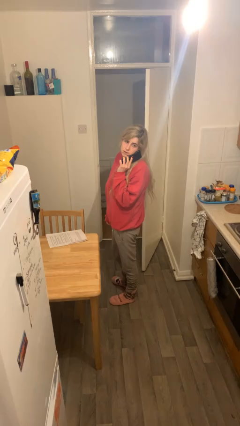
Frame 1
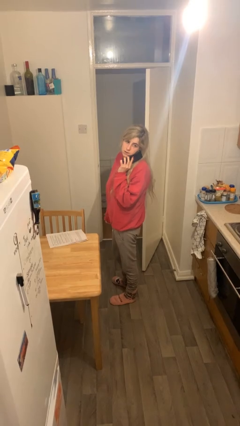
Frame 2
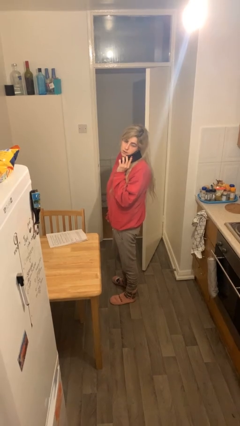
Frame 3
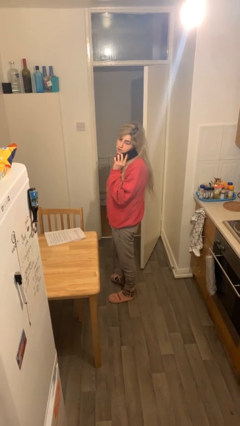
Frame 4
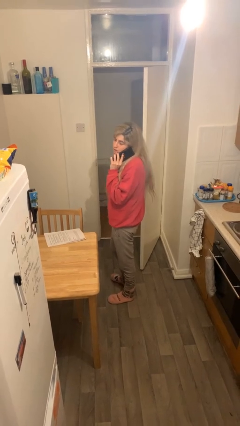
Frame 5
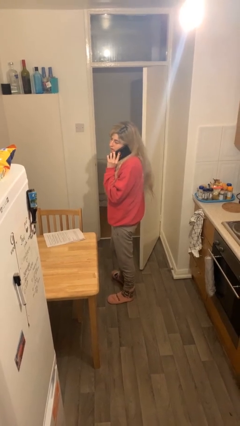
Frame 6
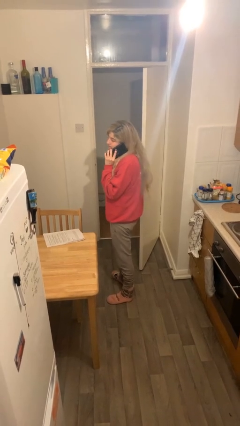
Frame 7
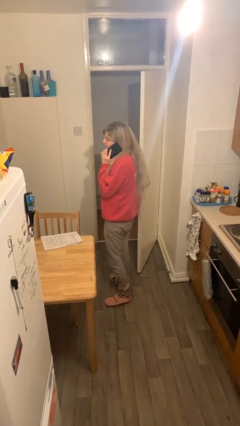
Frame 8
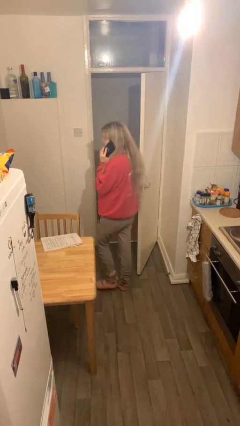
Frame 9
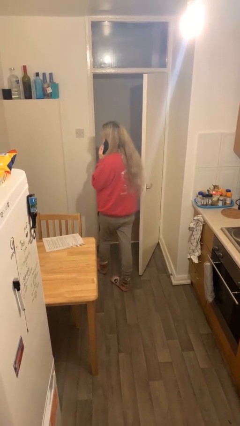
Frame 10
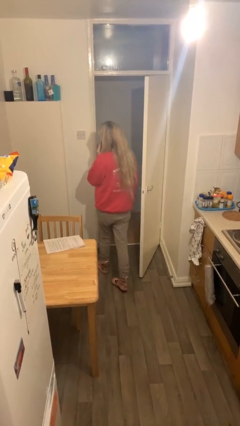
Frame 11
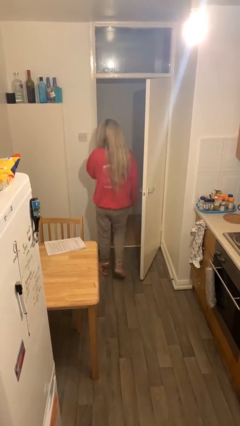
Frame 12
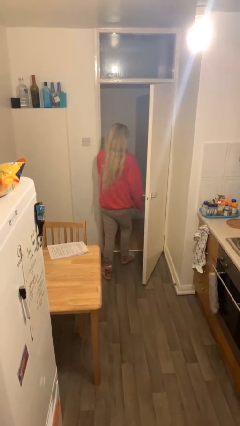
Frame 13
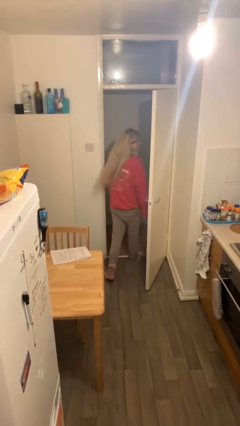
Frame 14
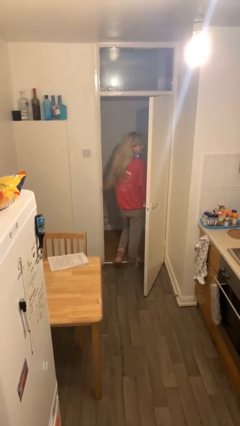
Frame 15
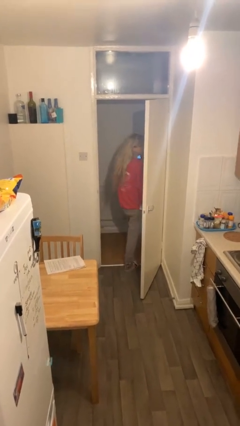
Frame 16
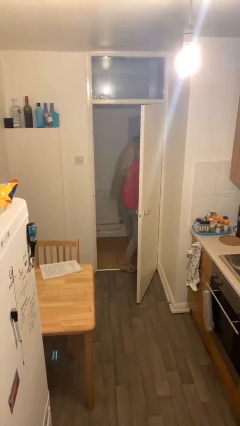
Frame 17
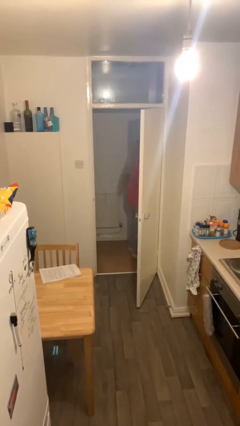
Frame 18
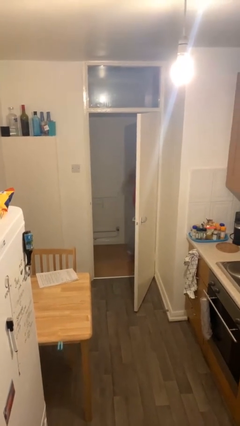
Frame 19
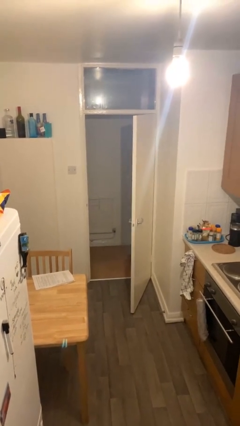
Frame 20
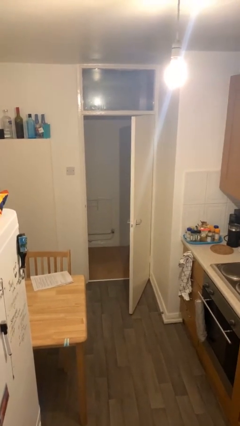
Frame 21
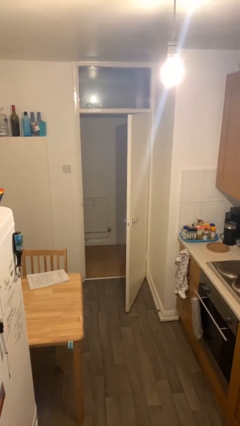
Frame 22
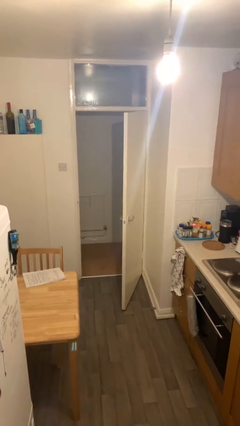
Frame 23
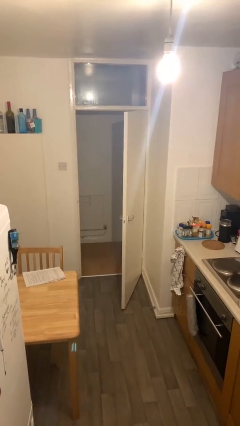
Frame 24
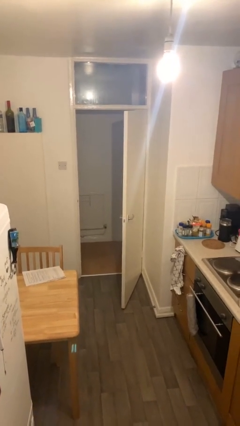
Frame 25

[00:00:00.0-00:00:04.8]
person exits scene through structure

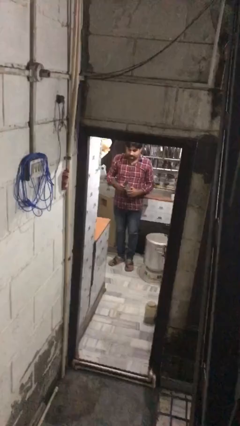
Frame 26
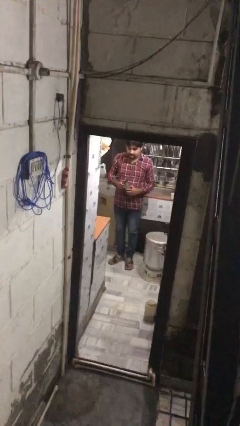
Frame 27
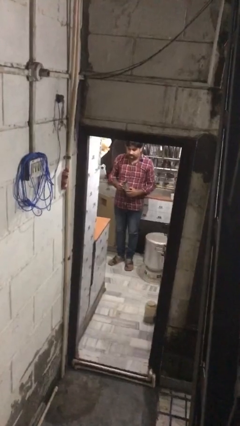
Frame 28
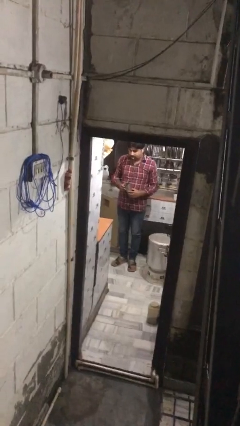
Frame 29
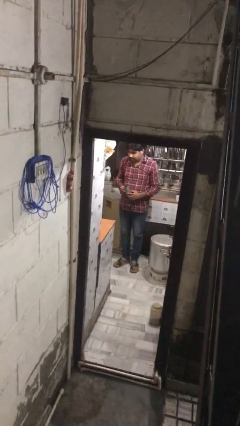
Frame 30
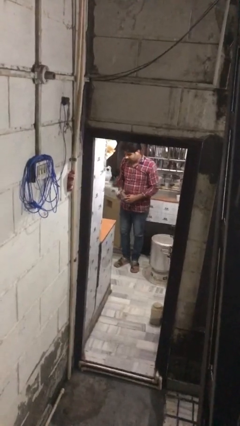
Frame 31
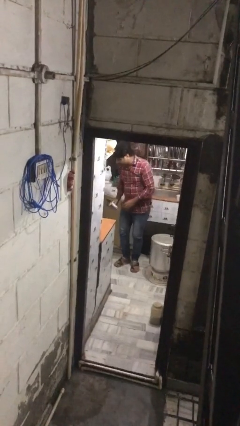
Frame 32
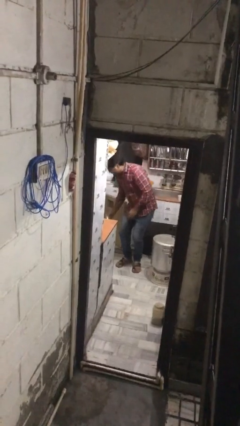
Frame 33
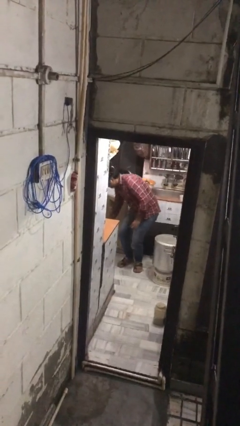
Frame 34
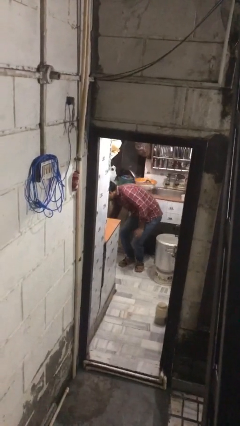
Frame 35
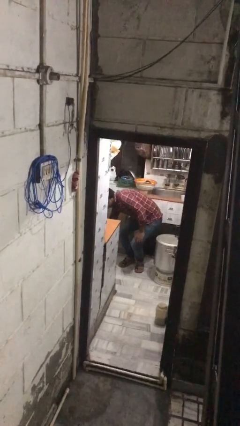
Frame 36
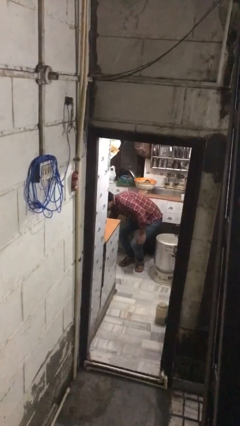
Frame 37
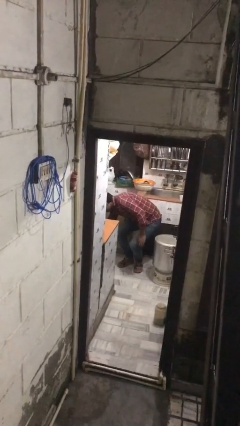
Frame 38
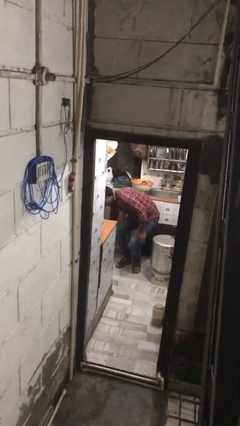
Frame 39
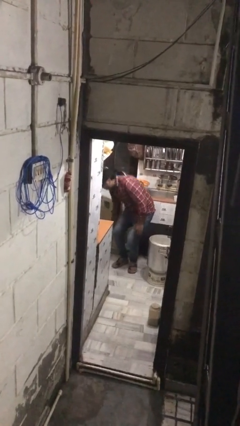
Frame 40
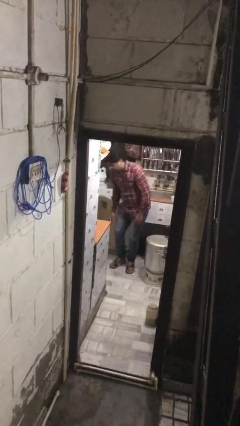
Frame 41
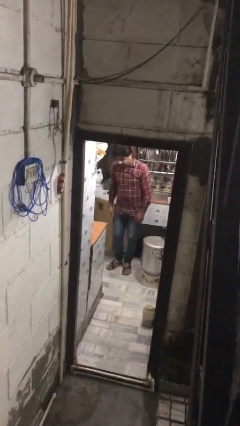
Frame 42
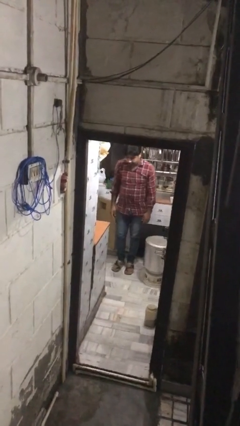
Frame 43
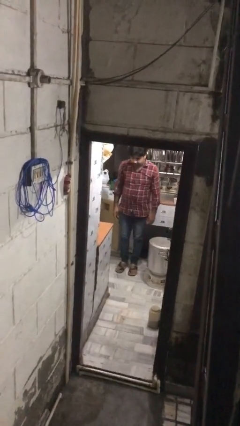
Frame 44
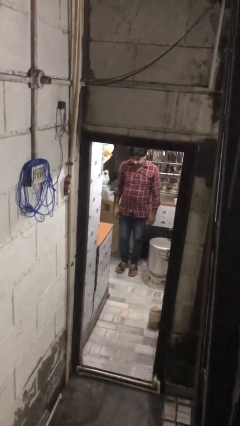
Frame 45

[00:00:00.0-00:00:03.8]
person puts object into kitchen drawer

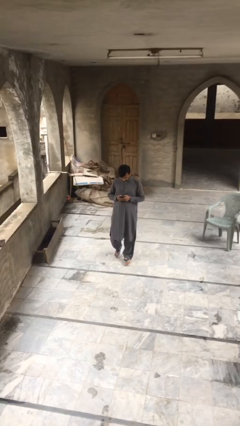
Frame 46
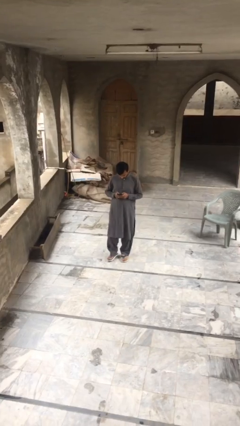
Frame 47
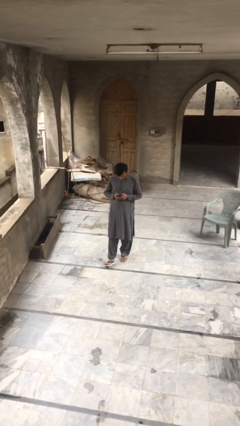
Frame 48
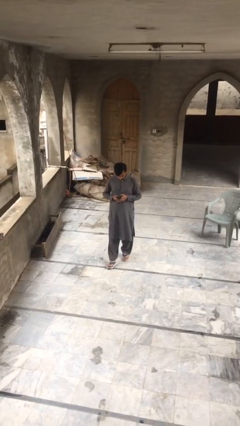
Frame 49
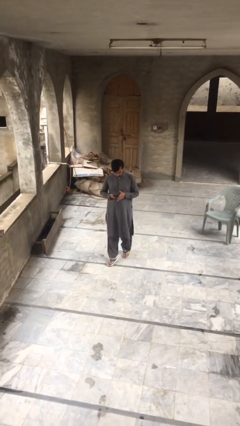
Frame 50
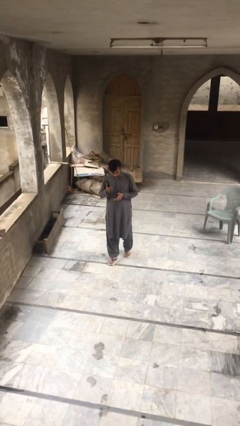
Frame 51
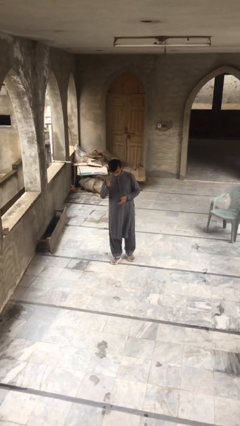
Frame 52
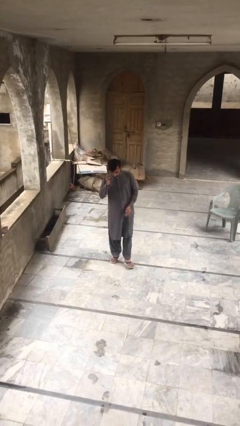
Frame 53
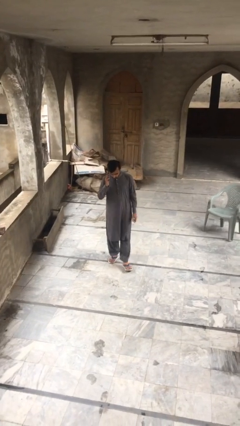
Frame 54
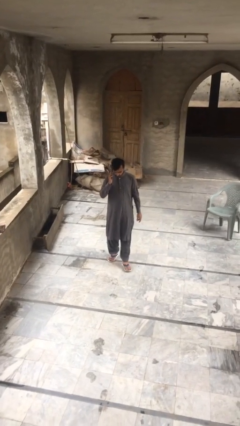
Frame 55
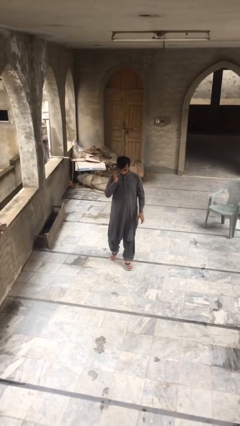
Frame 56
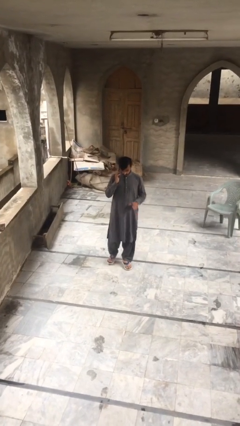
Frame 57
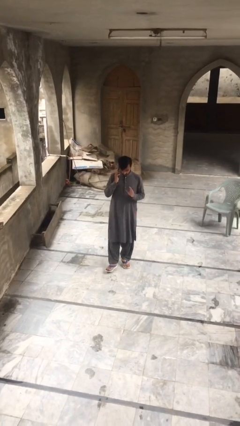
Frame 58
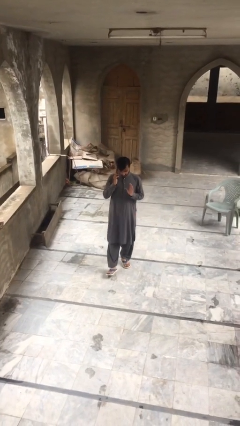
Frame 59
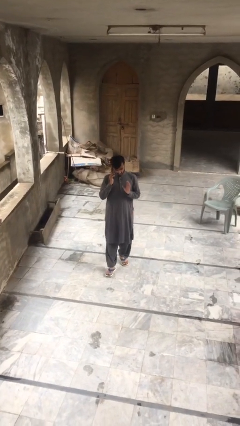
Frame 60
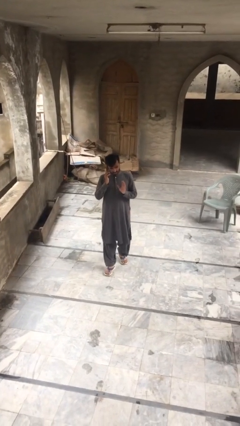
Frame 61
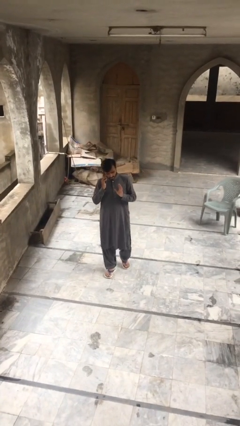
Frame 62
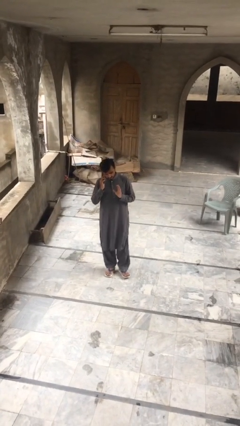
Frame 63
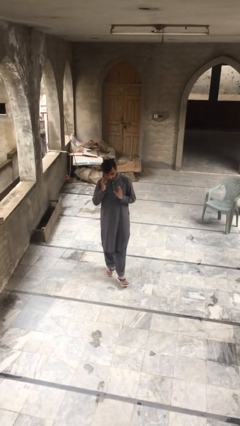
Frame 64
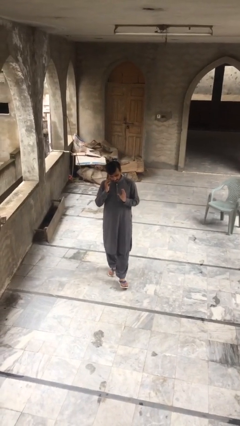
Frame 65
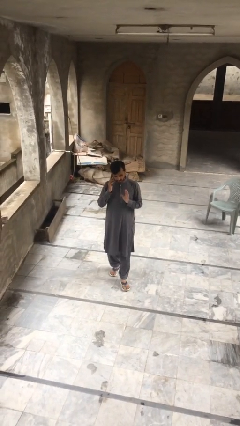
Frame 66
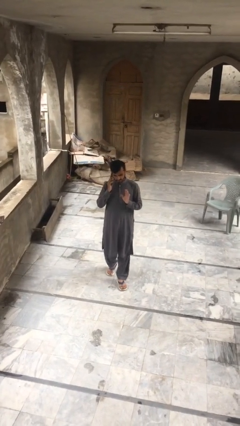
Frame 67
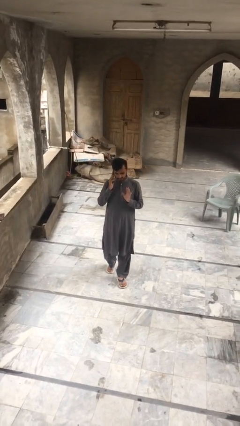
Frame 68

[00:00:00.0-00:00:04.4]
person talks on phone

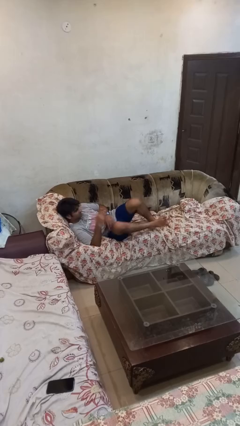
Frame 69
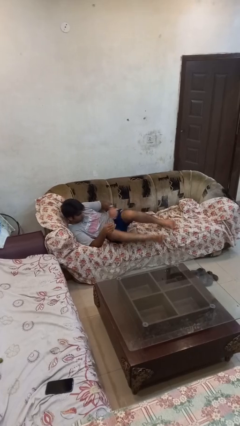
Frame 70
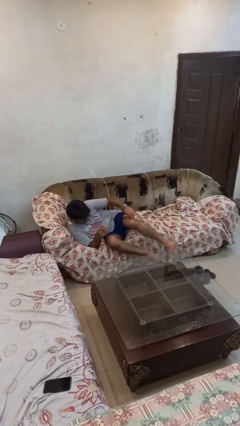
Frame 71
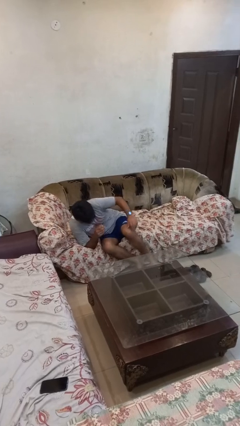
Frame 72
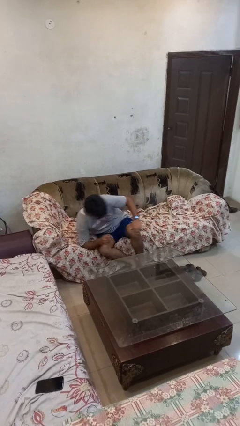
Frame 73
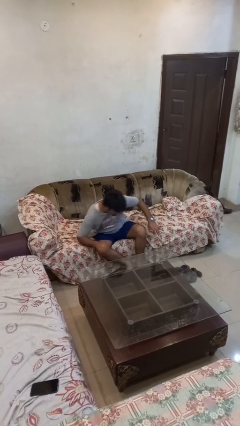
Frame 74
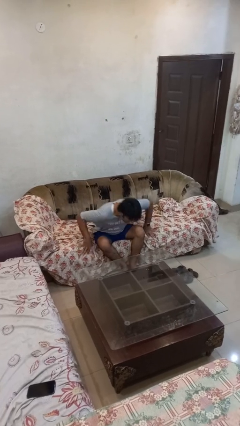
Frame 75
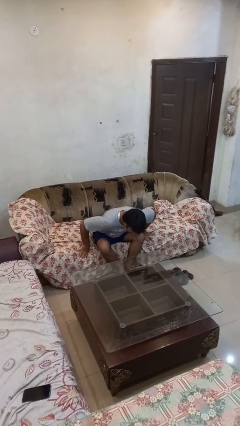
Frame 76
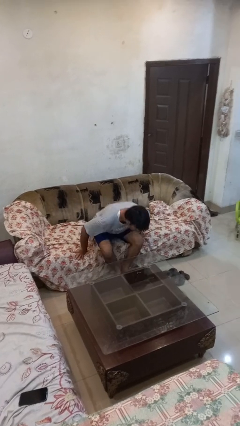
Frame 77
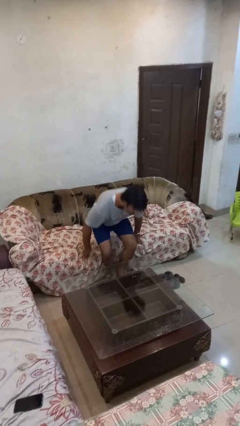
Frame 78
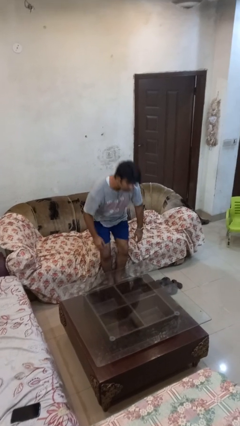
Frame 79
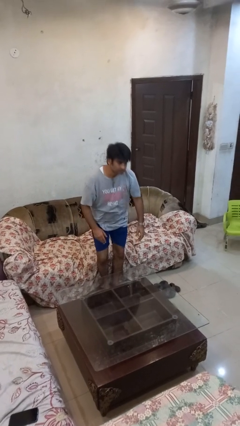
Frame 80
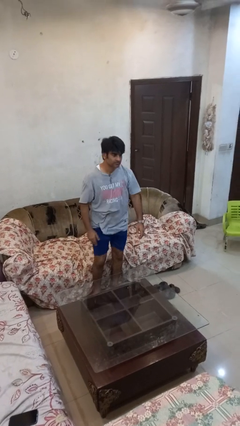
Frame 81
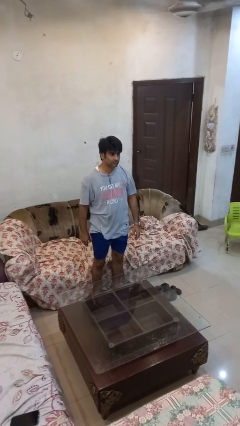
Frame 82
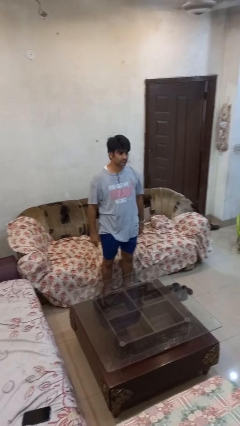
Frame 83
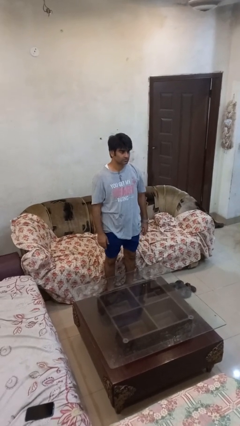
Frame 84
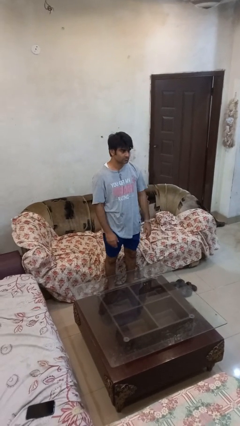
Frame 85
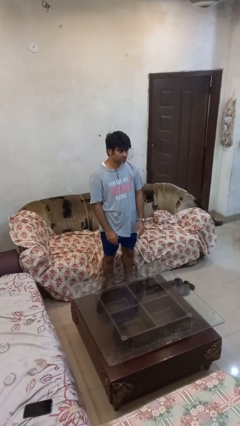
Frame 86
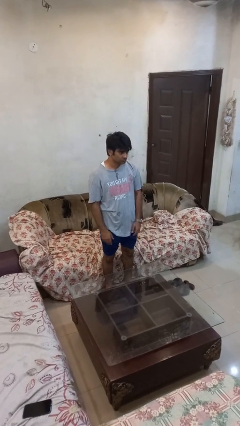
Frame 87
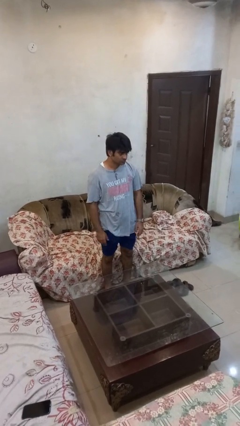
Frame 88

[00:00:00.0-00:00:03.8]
person stands up

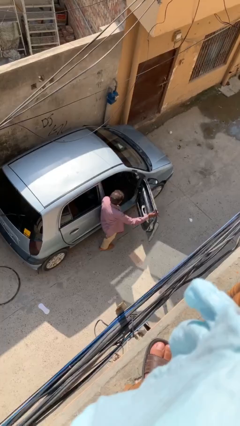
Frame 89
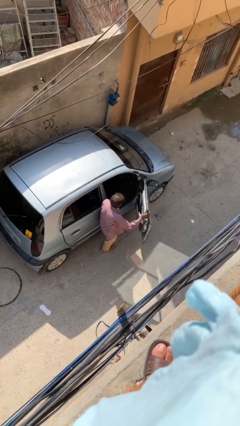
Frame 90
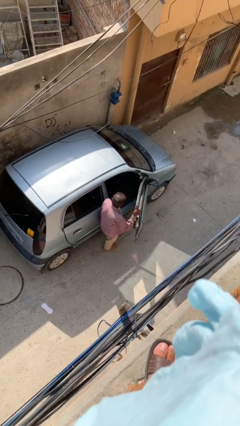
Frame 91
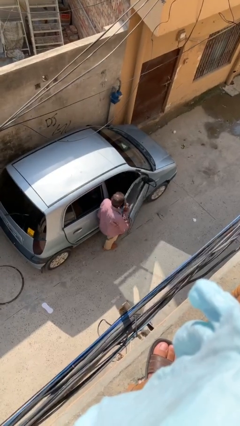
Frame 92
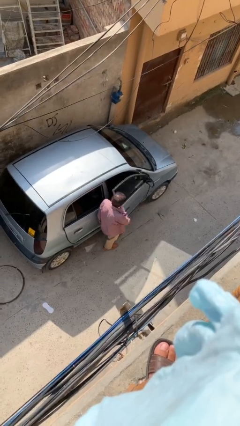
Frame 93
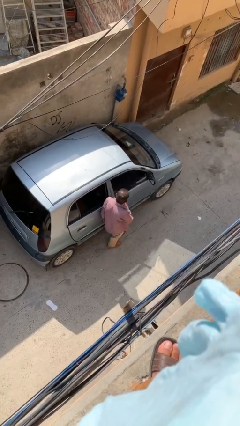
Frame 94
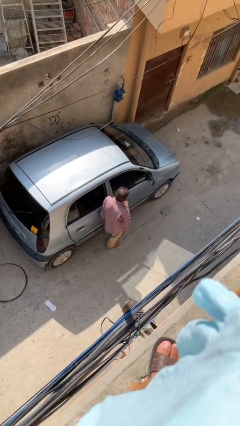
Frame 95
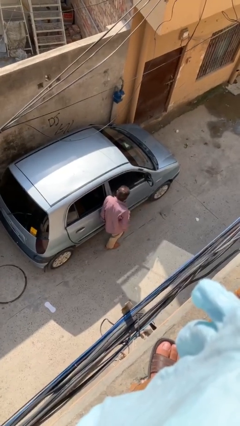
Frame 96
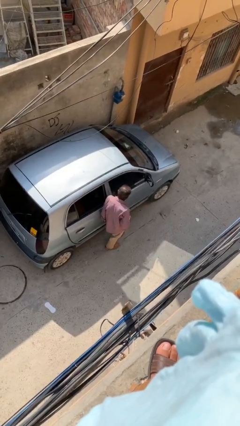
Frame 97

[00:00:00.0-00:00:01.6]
person closes car door
